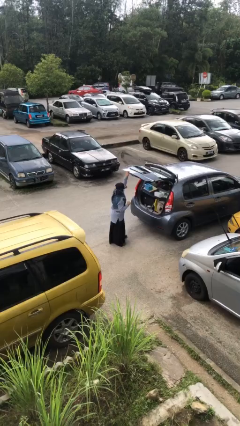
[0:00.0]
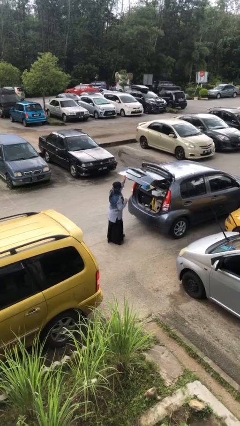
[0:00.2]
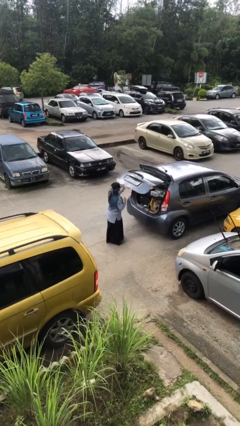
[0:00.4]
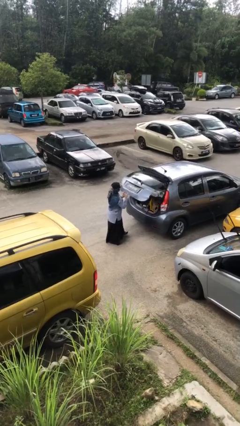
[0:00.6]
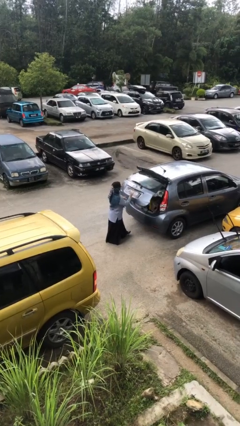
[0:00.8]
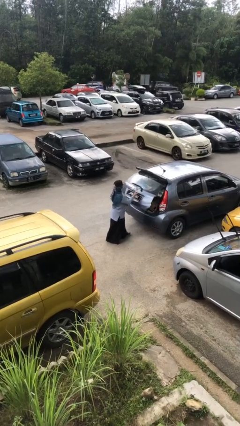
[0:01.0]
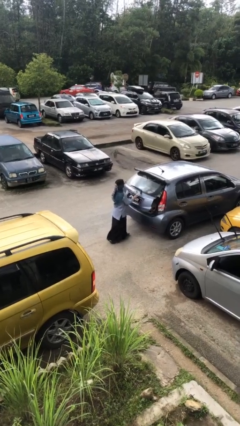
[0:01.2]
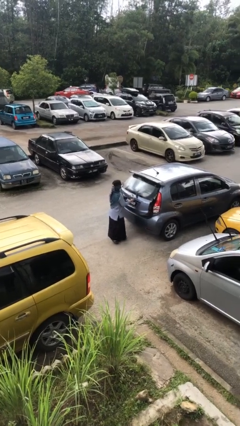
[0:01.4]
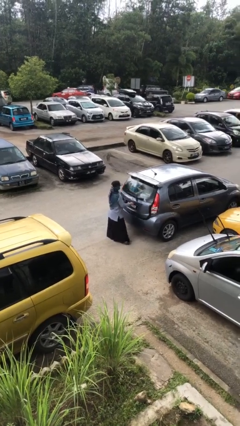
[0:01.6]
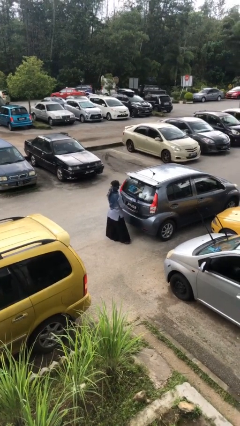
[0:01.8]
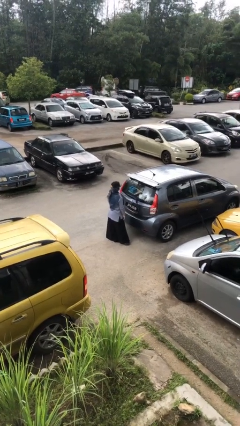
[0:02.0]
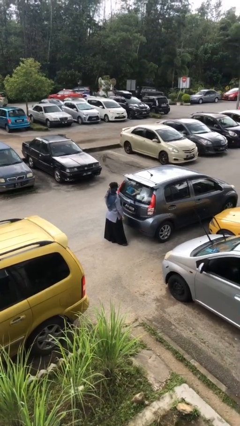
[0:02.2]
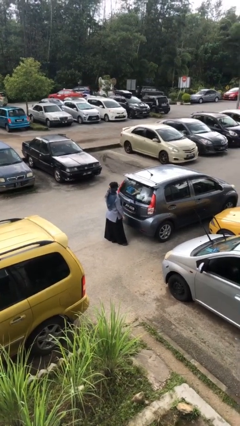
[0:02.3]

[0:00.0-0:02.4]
person closes car trunk

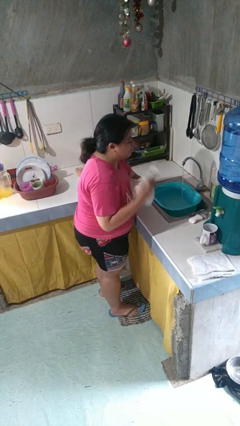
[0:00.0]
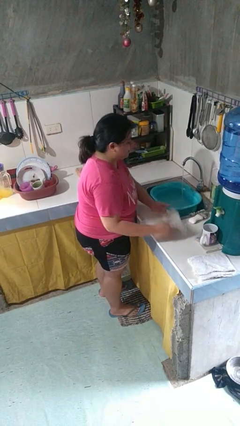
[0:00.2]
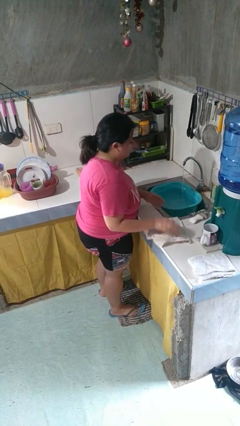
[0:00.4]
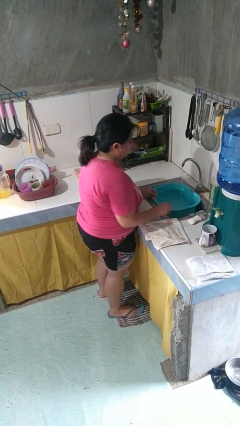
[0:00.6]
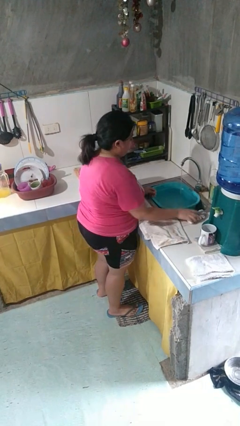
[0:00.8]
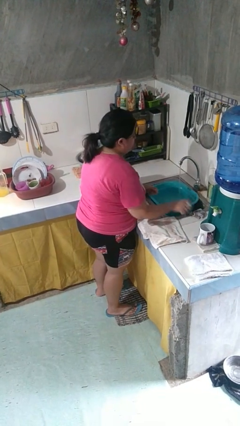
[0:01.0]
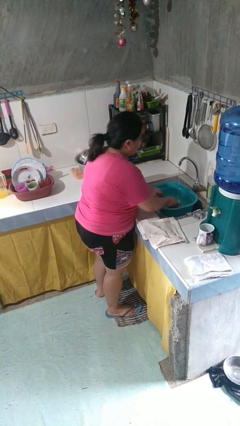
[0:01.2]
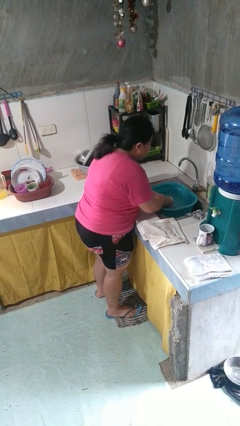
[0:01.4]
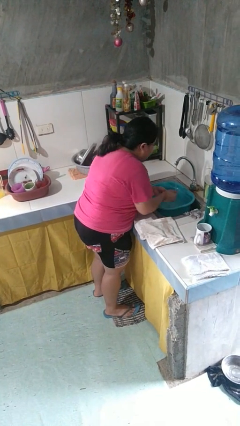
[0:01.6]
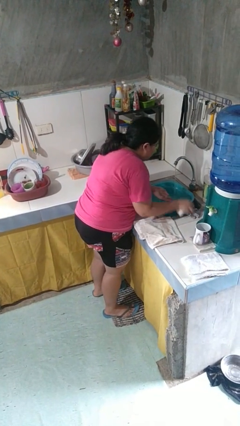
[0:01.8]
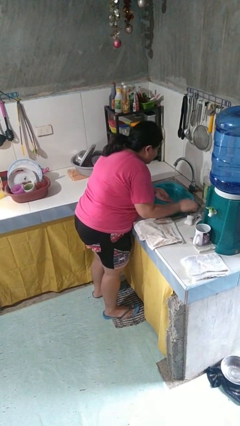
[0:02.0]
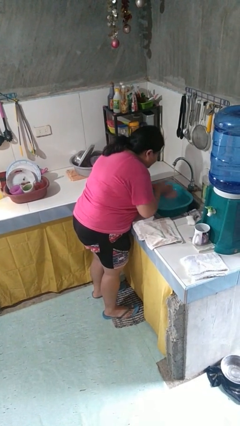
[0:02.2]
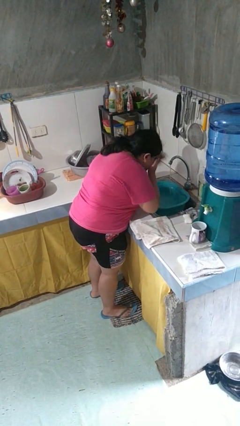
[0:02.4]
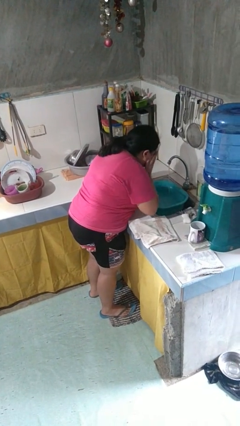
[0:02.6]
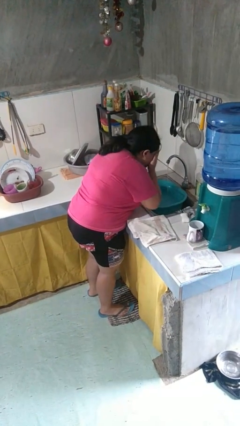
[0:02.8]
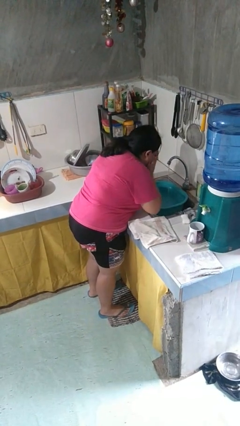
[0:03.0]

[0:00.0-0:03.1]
person washes face

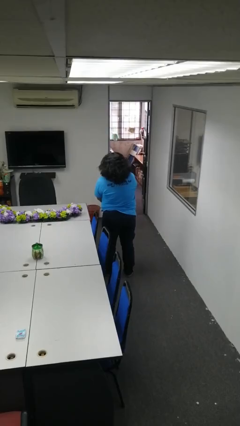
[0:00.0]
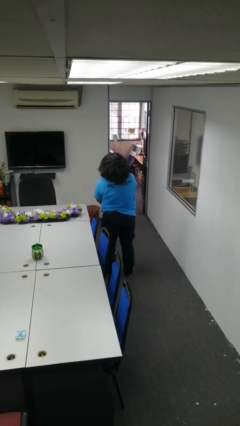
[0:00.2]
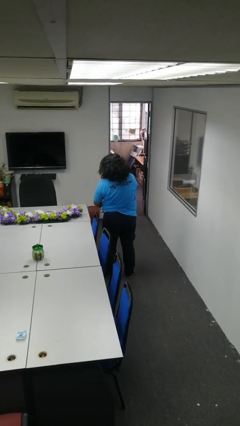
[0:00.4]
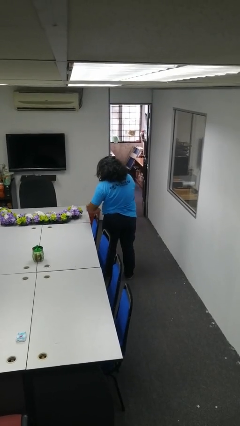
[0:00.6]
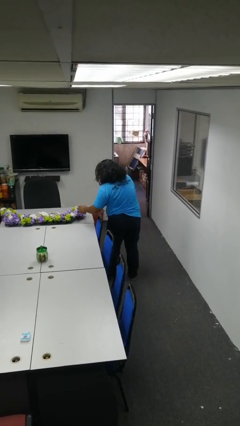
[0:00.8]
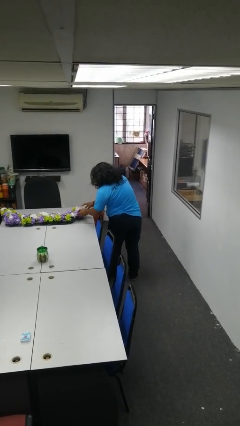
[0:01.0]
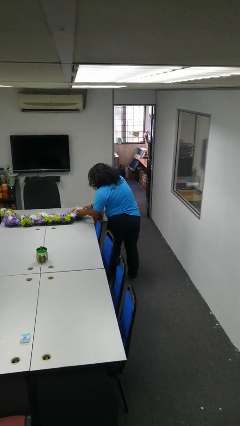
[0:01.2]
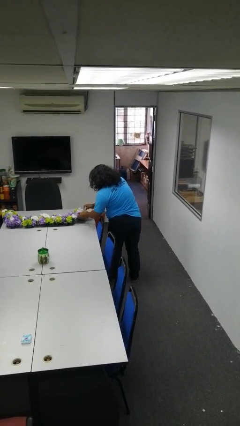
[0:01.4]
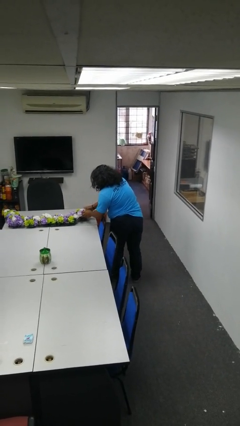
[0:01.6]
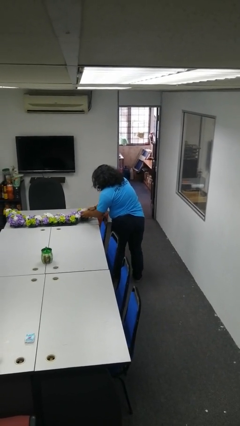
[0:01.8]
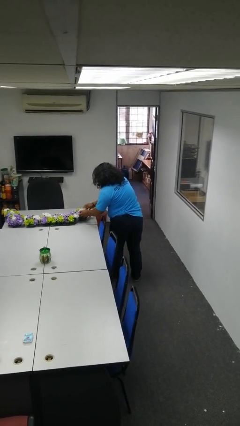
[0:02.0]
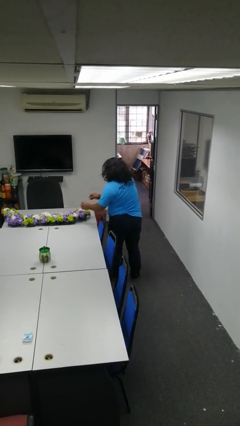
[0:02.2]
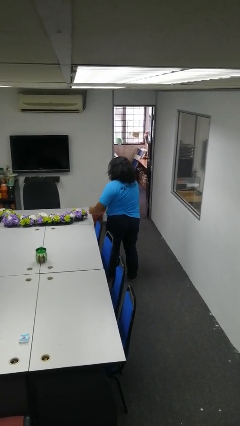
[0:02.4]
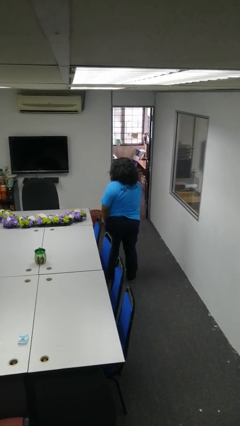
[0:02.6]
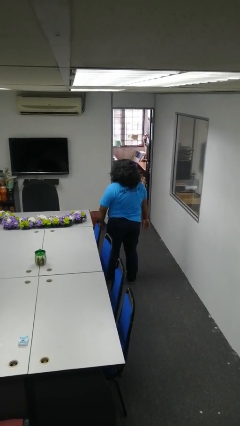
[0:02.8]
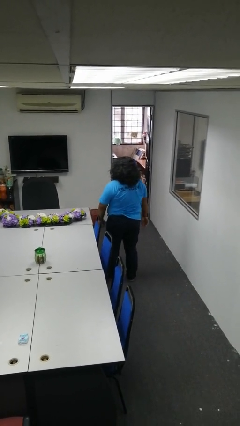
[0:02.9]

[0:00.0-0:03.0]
person arranges flowers in vase

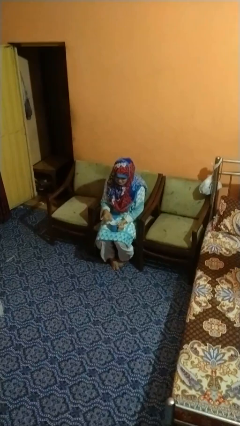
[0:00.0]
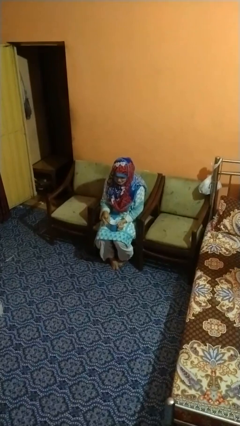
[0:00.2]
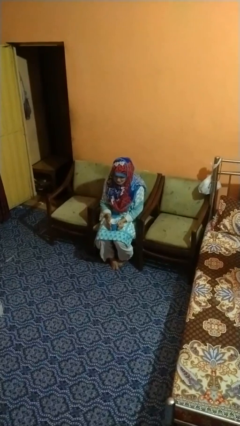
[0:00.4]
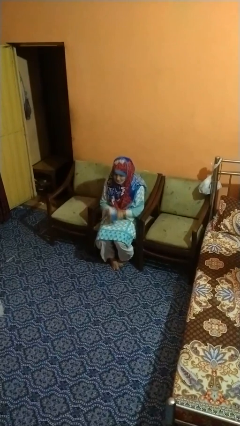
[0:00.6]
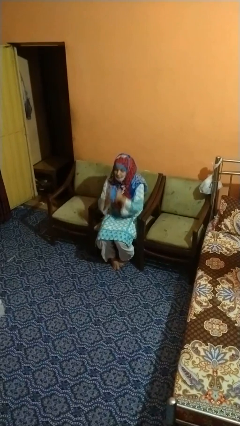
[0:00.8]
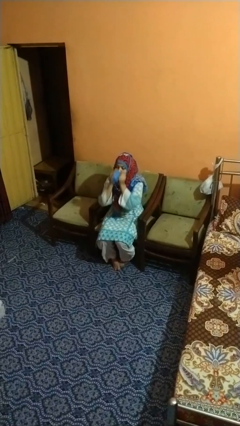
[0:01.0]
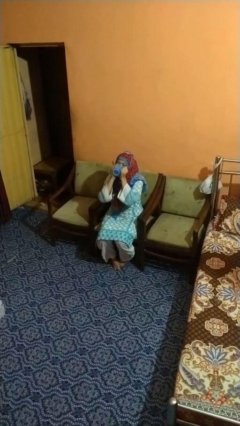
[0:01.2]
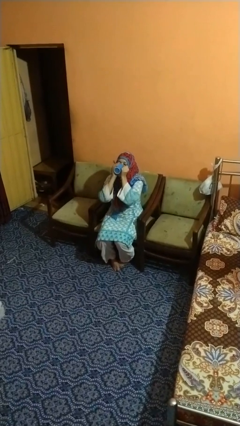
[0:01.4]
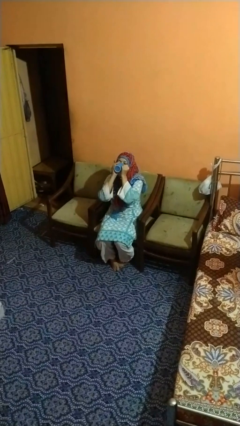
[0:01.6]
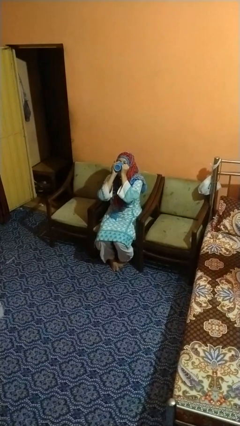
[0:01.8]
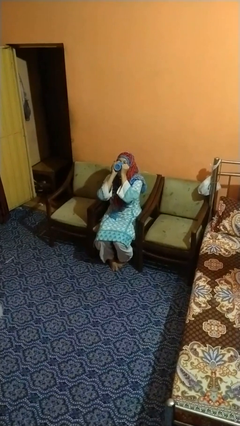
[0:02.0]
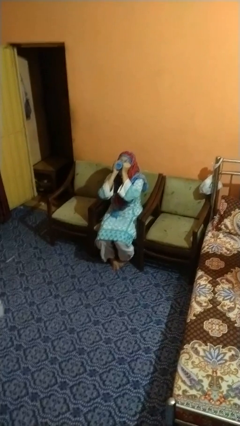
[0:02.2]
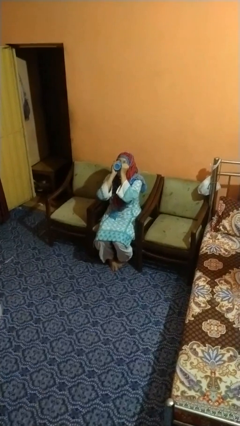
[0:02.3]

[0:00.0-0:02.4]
person drinks from mug

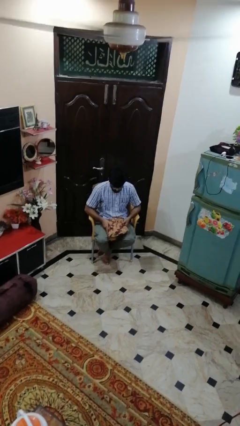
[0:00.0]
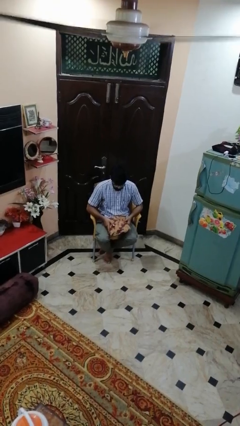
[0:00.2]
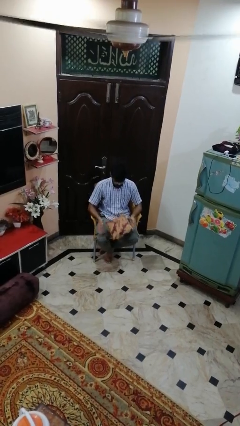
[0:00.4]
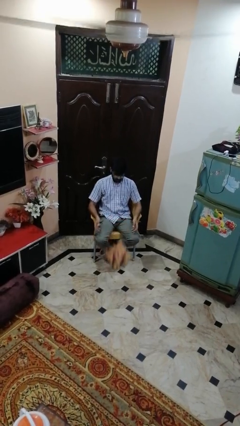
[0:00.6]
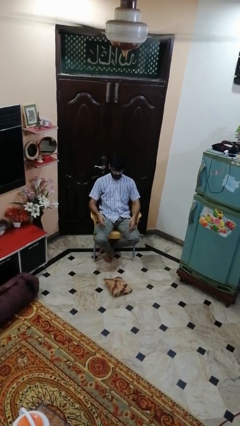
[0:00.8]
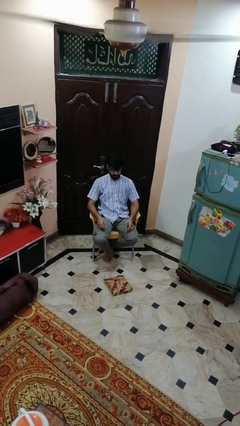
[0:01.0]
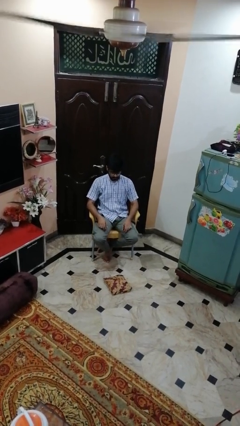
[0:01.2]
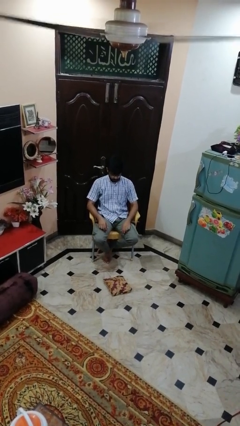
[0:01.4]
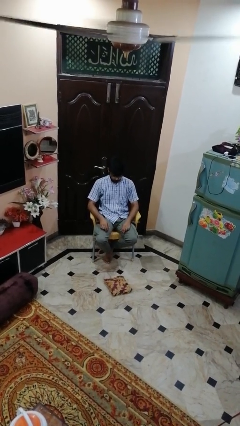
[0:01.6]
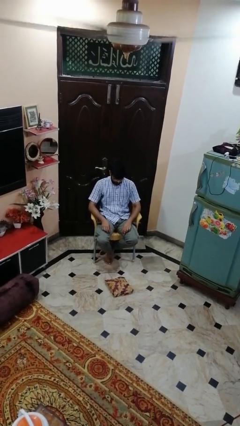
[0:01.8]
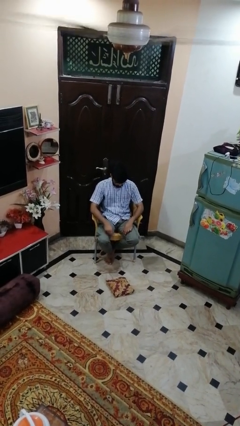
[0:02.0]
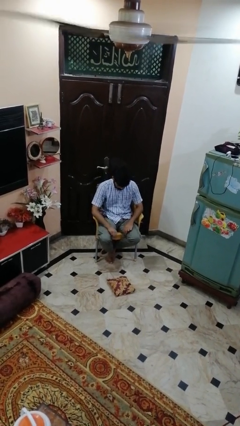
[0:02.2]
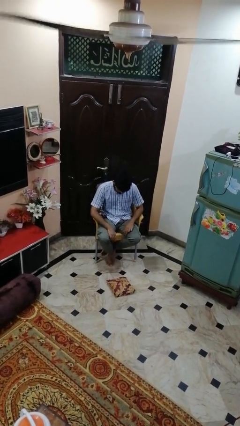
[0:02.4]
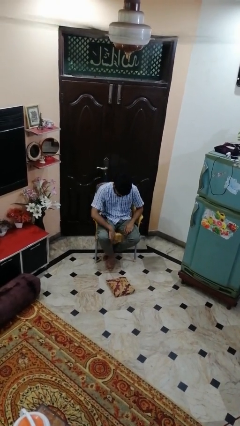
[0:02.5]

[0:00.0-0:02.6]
person drops object

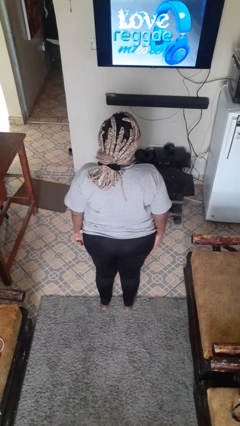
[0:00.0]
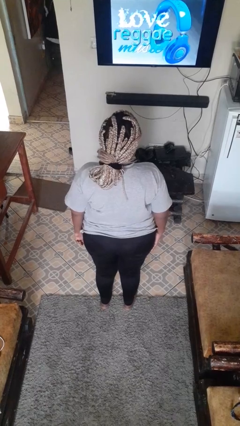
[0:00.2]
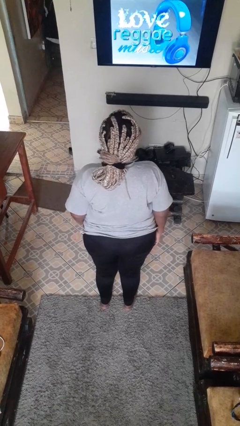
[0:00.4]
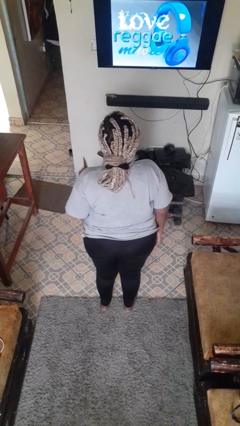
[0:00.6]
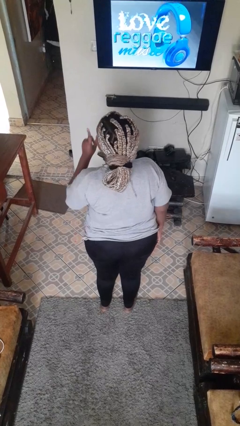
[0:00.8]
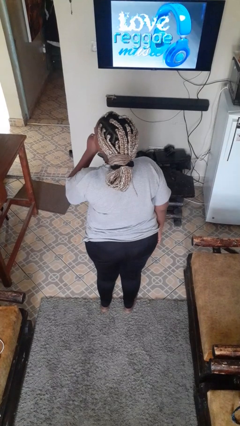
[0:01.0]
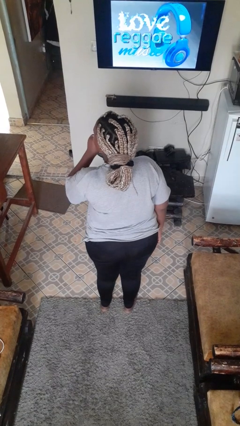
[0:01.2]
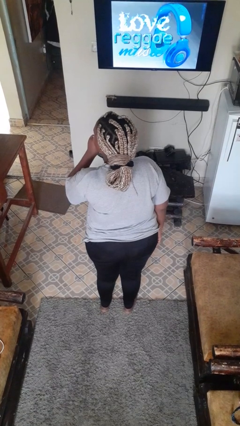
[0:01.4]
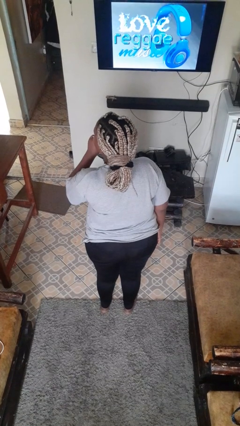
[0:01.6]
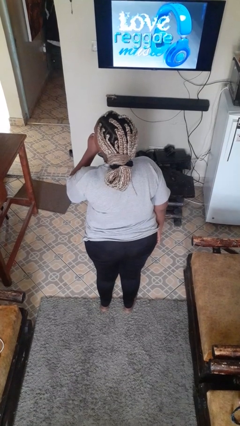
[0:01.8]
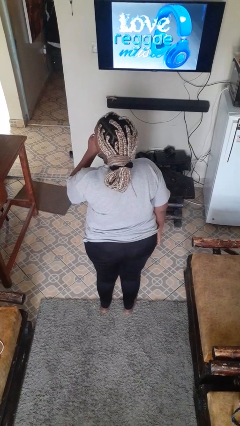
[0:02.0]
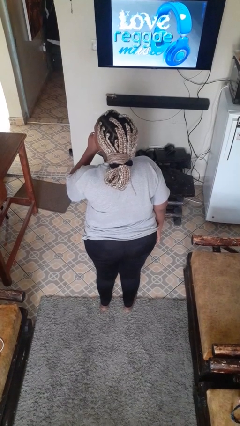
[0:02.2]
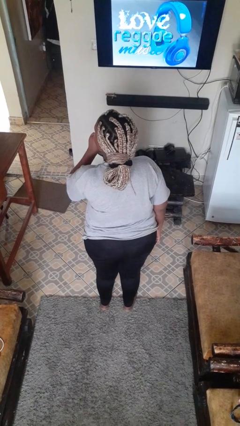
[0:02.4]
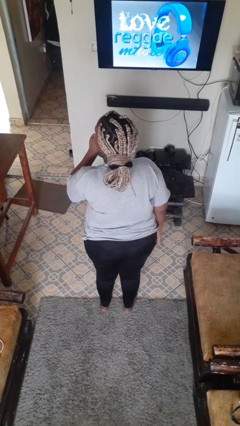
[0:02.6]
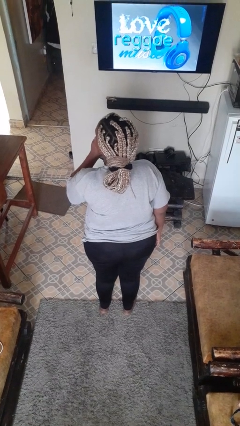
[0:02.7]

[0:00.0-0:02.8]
person gestures be quiet

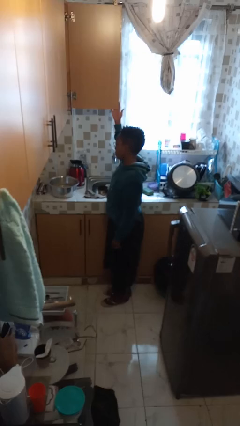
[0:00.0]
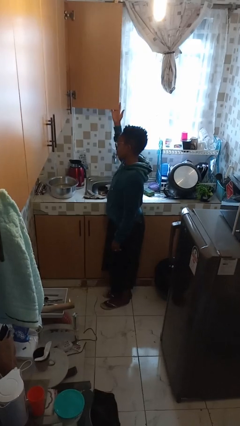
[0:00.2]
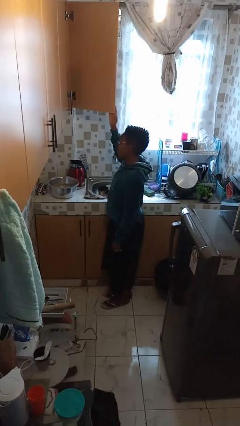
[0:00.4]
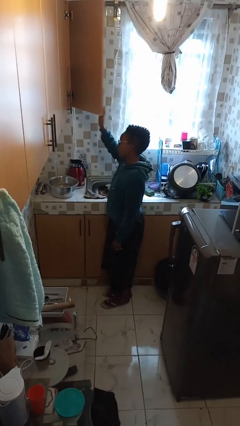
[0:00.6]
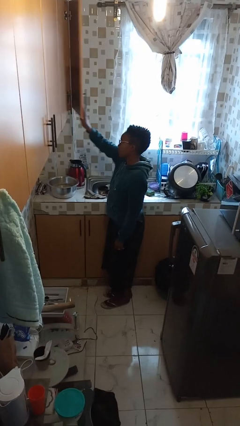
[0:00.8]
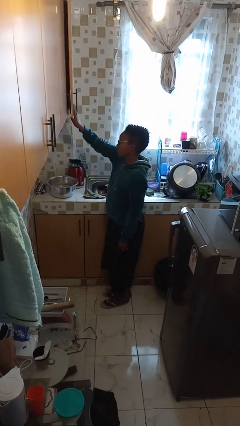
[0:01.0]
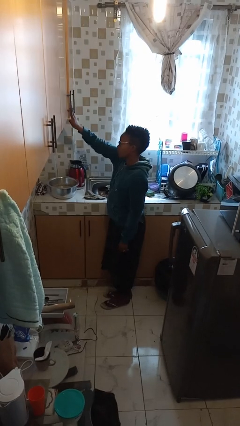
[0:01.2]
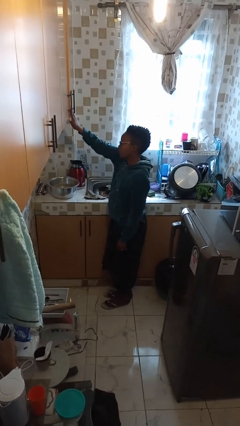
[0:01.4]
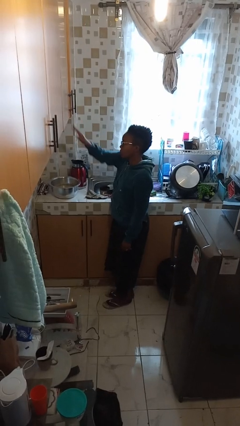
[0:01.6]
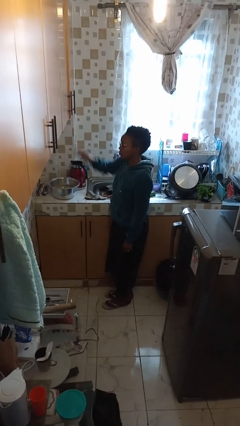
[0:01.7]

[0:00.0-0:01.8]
person closes cabinet
